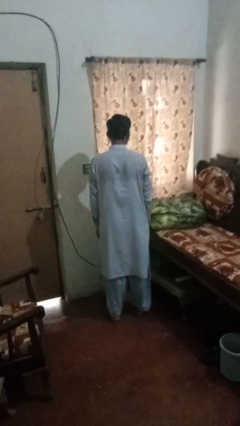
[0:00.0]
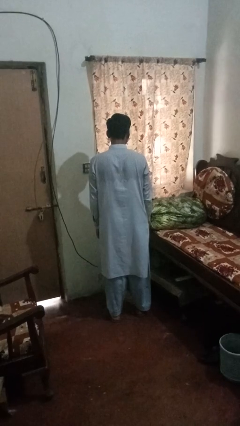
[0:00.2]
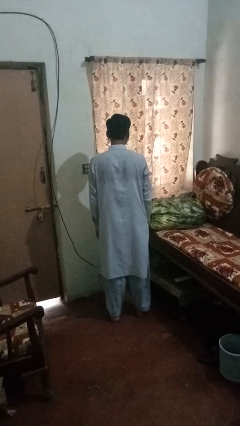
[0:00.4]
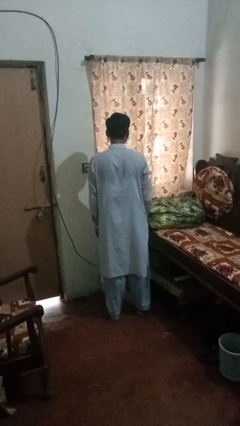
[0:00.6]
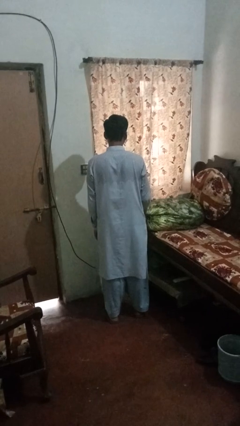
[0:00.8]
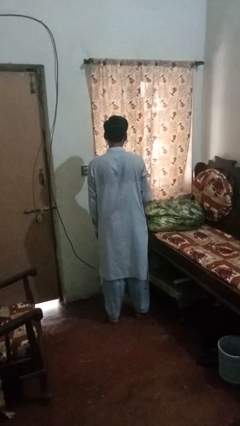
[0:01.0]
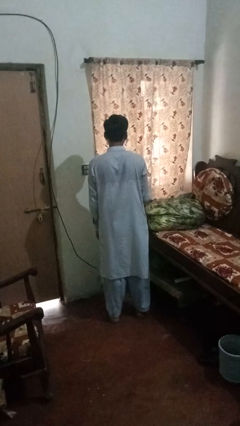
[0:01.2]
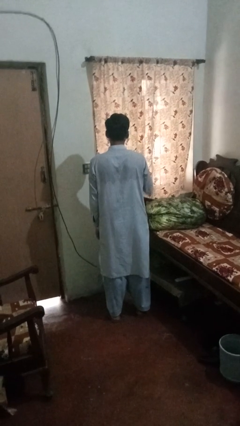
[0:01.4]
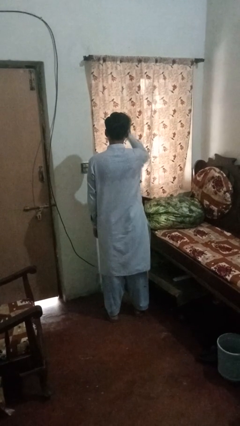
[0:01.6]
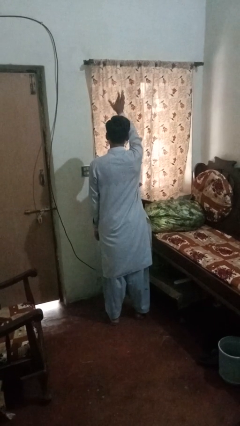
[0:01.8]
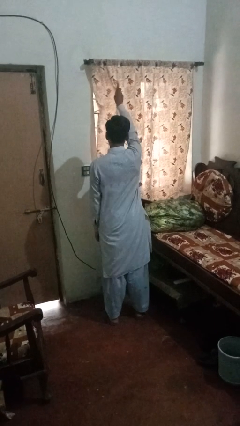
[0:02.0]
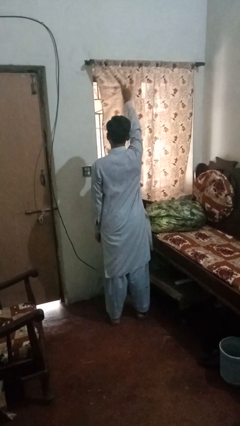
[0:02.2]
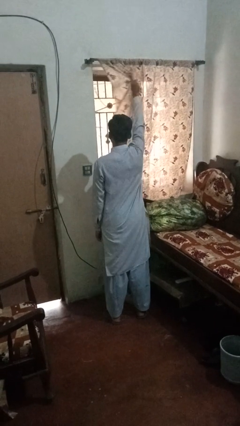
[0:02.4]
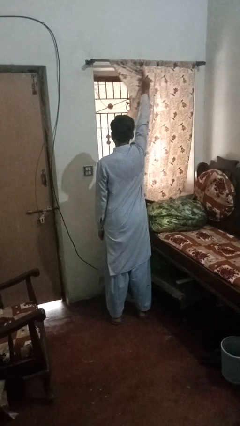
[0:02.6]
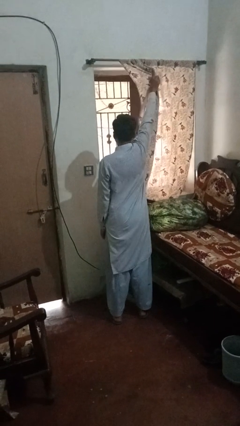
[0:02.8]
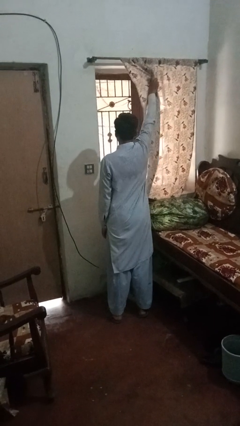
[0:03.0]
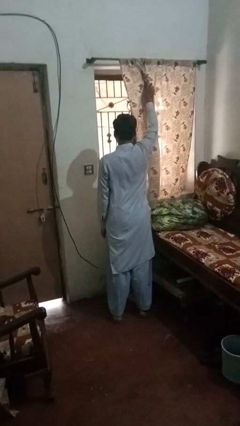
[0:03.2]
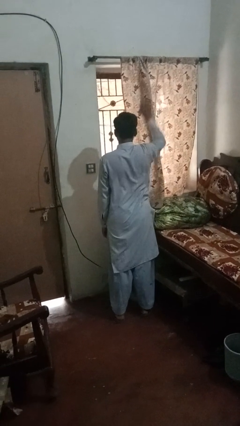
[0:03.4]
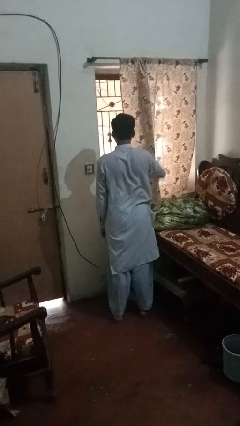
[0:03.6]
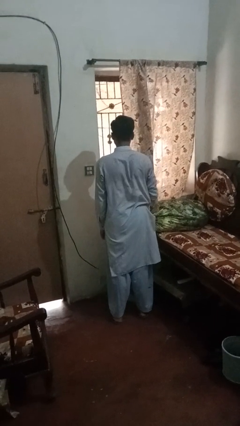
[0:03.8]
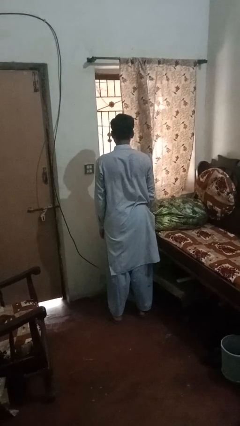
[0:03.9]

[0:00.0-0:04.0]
person opens curtains

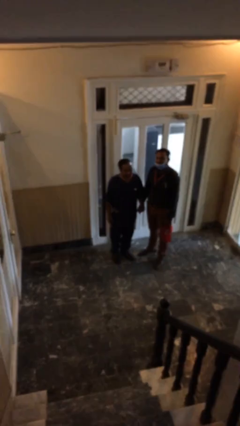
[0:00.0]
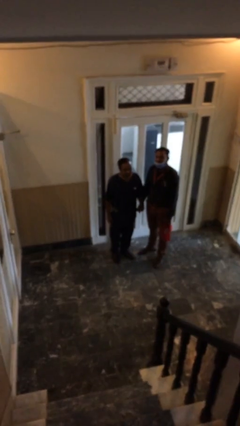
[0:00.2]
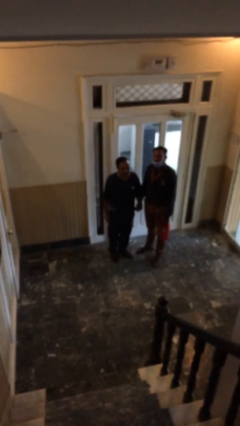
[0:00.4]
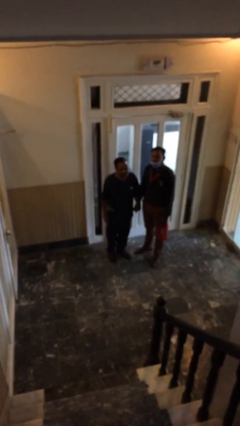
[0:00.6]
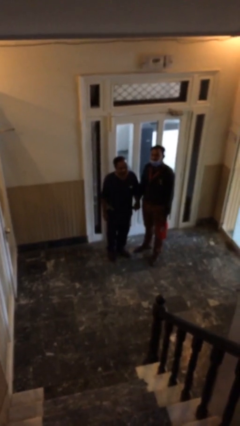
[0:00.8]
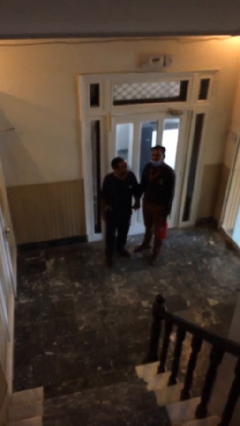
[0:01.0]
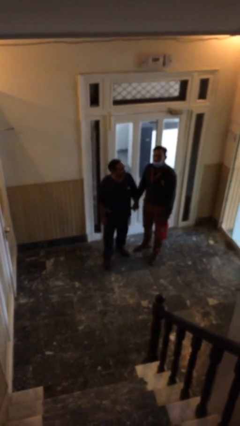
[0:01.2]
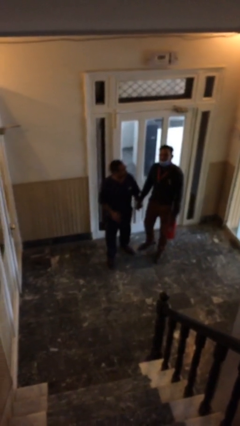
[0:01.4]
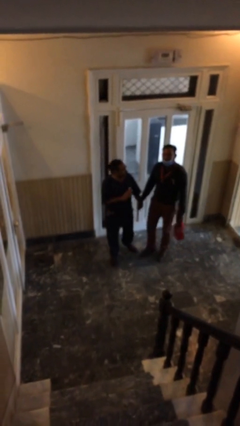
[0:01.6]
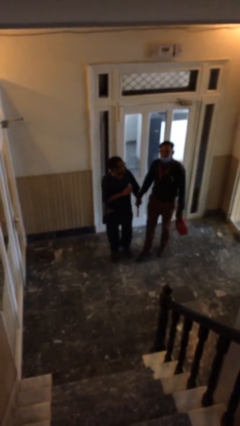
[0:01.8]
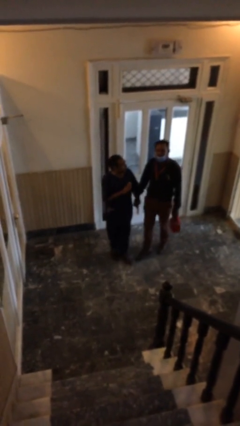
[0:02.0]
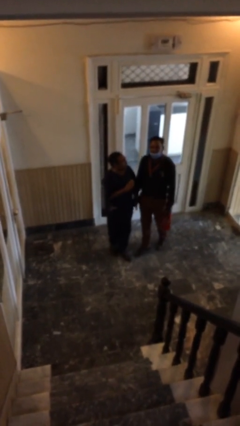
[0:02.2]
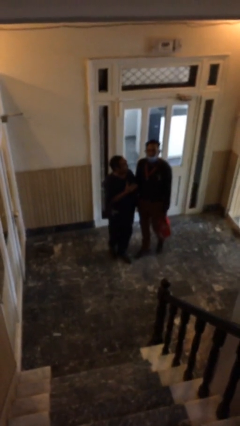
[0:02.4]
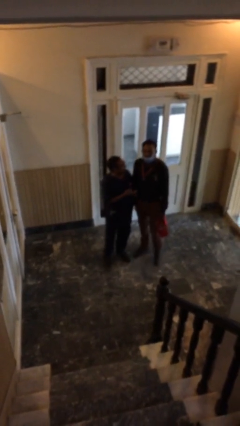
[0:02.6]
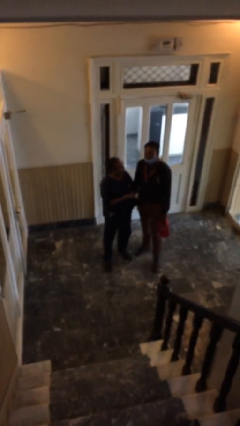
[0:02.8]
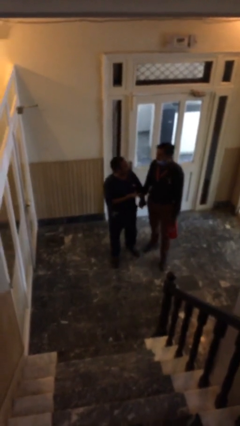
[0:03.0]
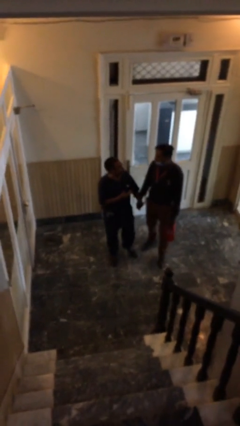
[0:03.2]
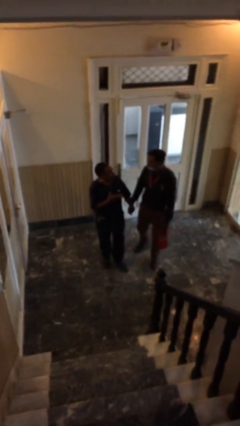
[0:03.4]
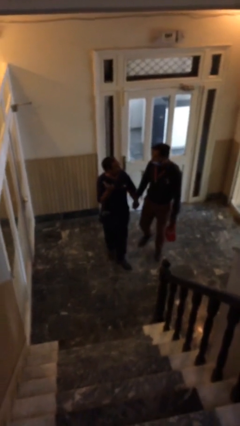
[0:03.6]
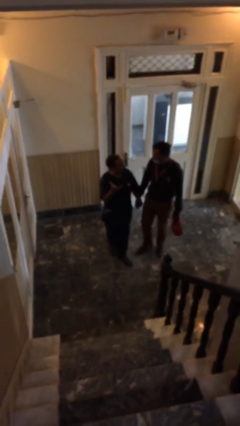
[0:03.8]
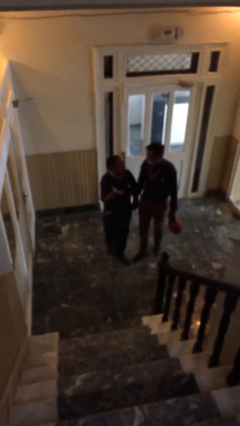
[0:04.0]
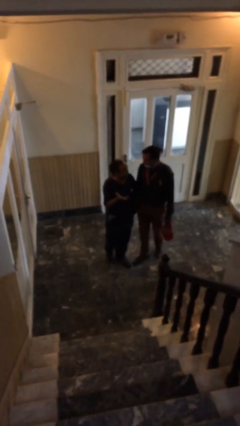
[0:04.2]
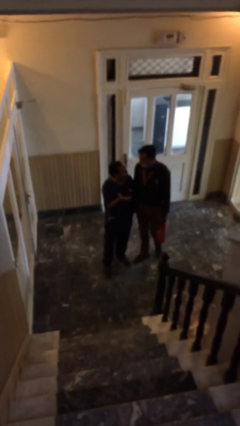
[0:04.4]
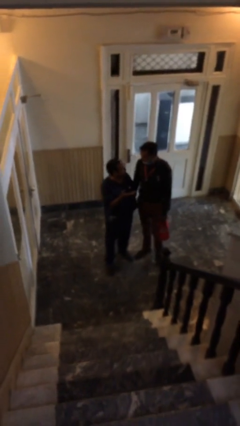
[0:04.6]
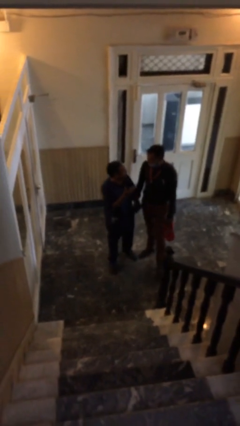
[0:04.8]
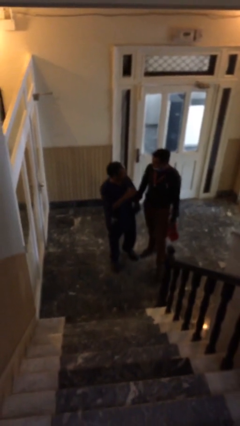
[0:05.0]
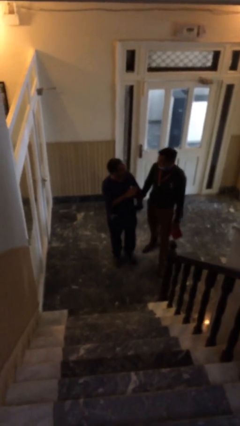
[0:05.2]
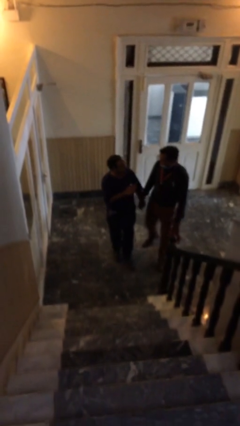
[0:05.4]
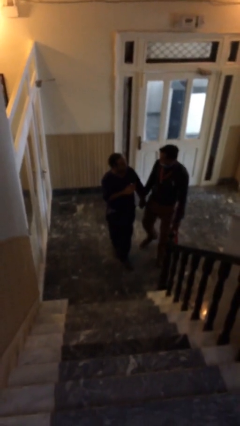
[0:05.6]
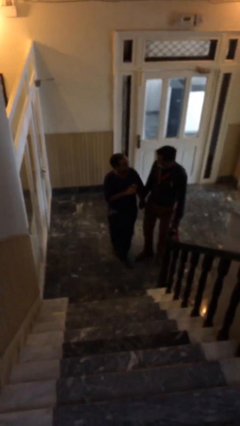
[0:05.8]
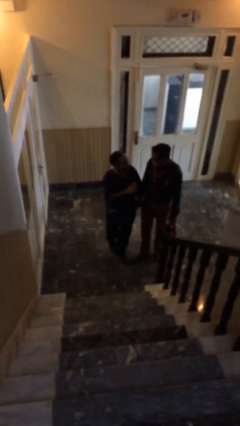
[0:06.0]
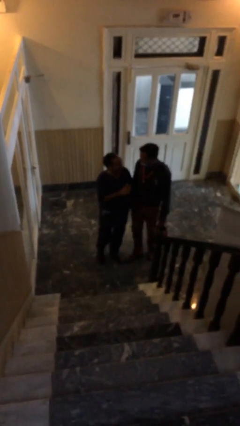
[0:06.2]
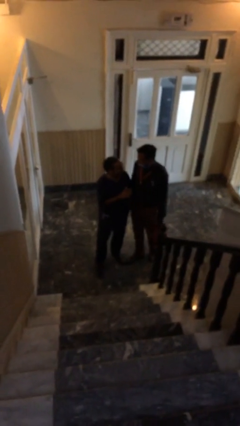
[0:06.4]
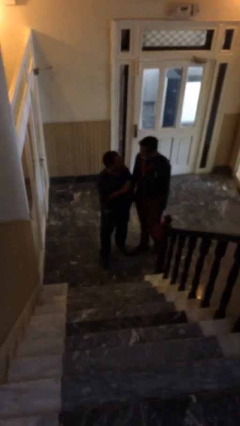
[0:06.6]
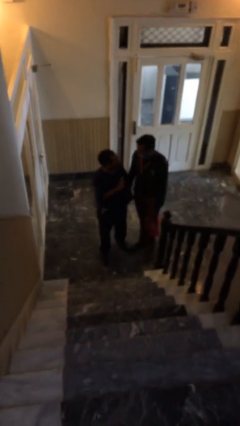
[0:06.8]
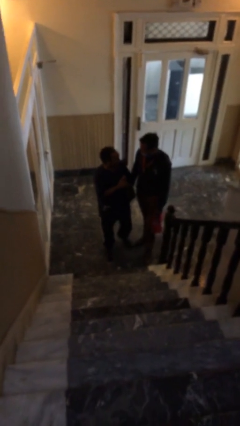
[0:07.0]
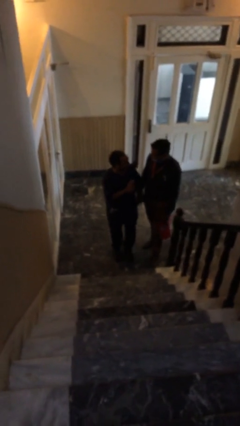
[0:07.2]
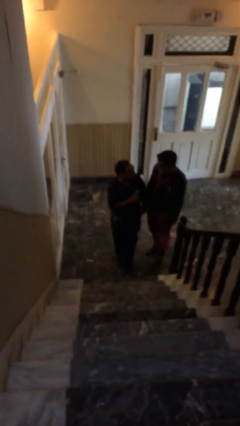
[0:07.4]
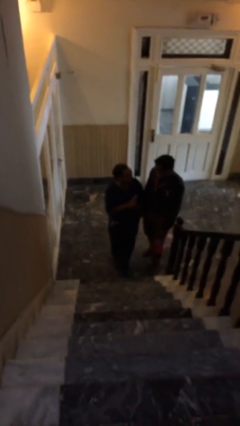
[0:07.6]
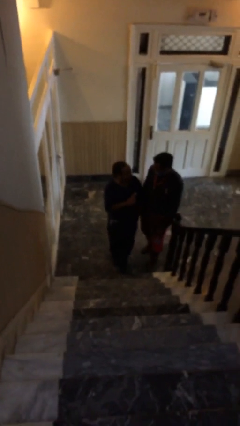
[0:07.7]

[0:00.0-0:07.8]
person holds hand

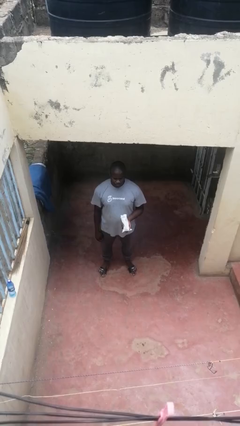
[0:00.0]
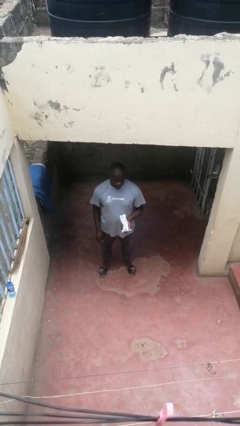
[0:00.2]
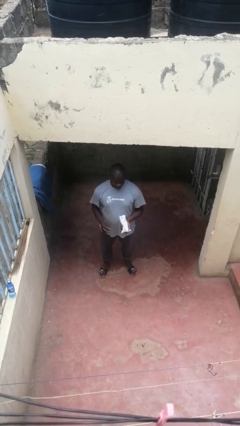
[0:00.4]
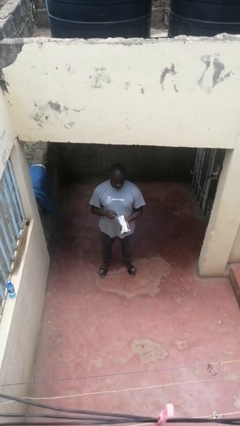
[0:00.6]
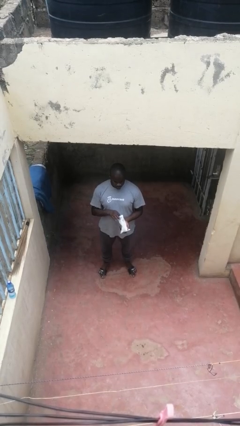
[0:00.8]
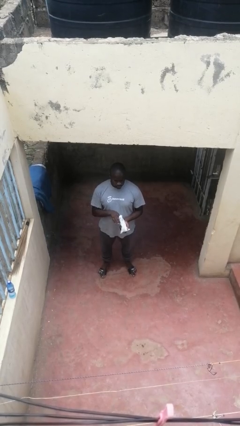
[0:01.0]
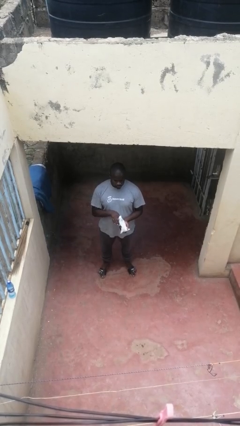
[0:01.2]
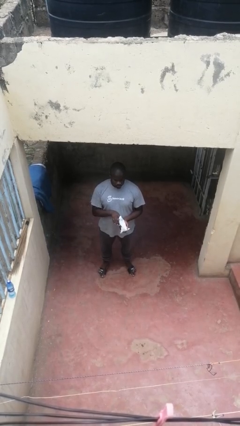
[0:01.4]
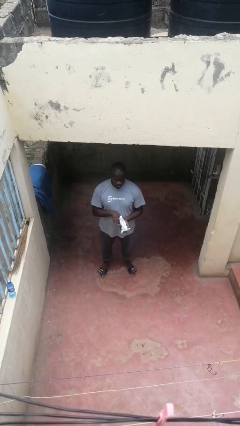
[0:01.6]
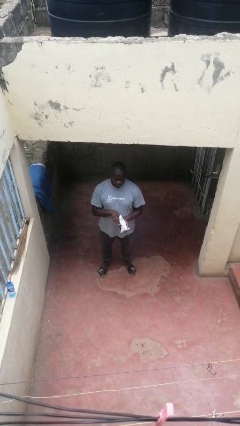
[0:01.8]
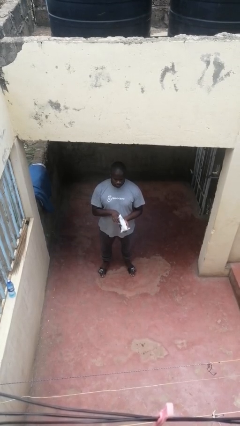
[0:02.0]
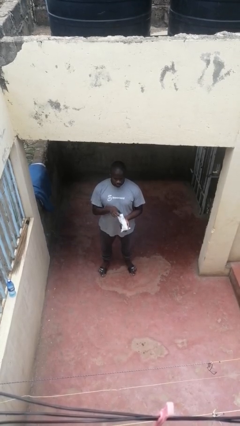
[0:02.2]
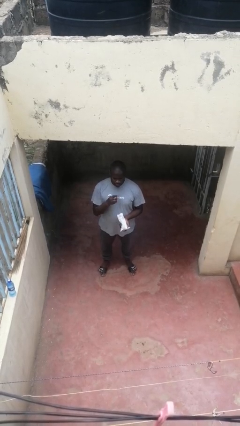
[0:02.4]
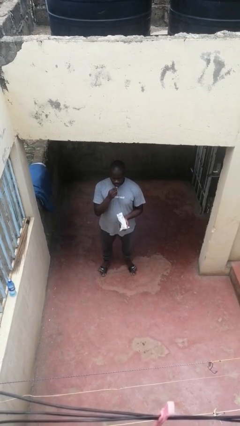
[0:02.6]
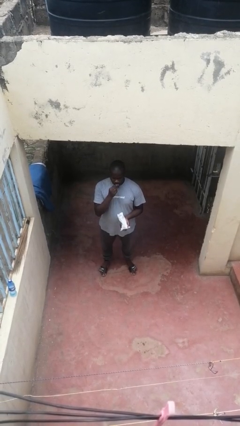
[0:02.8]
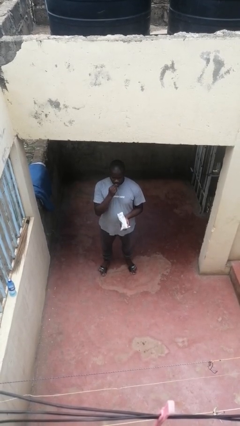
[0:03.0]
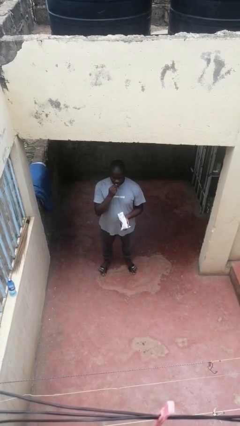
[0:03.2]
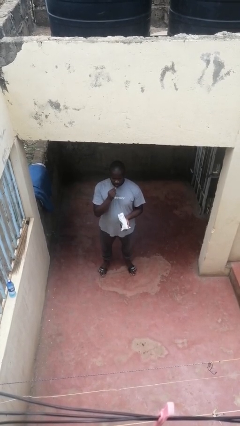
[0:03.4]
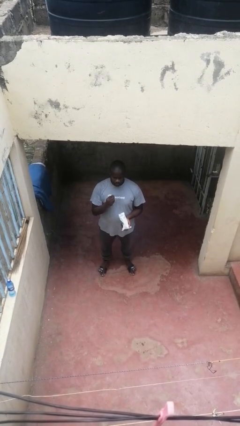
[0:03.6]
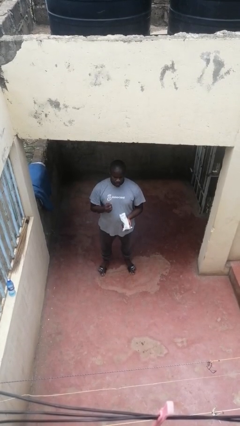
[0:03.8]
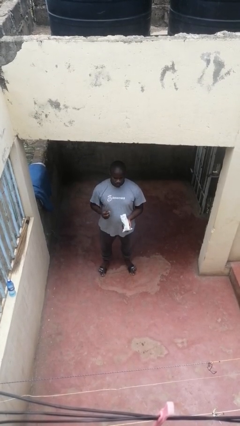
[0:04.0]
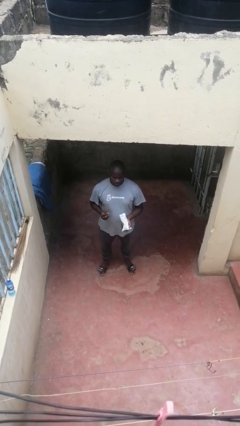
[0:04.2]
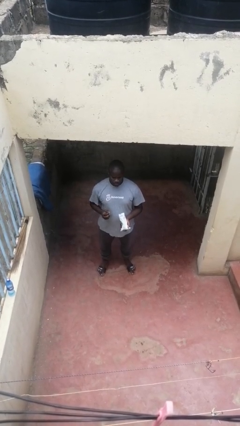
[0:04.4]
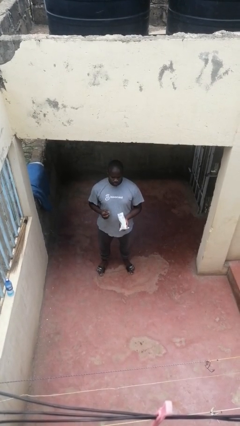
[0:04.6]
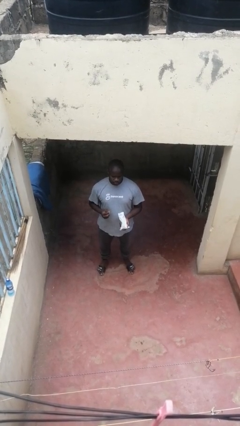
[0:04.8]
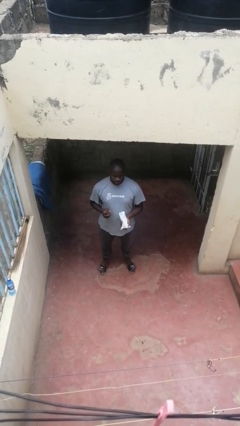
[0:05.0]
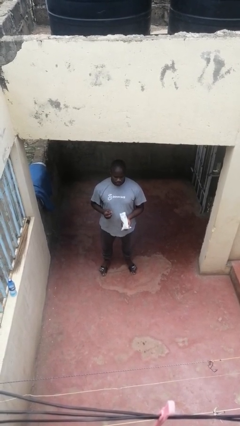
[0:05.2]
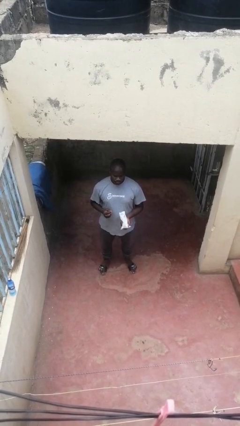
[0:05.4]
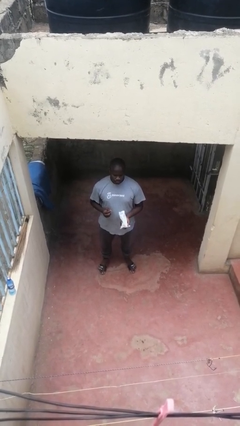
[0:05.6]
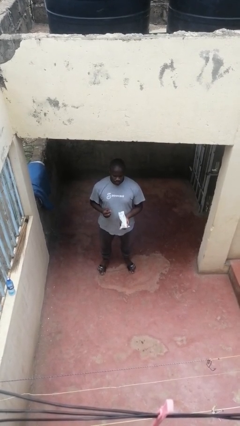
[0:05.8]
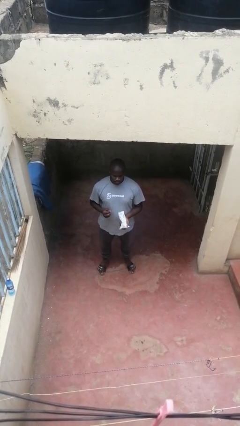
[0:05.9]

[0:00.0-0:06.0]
person eats snack from bag

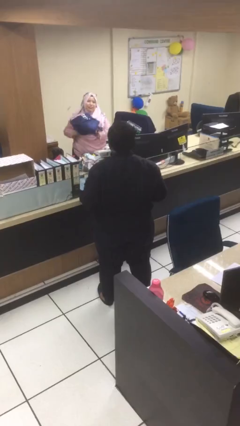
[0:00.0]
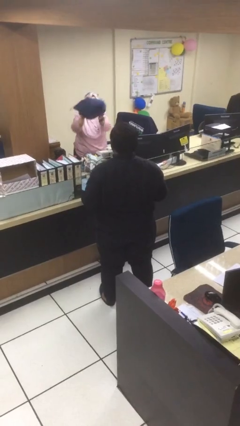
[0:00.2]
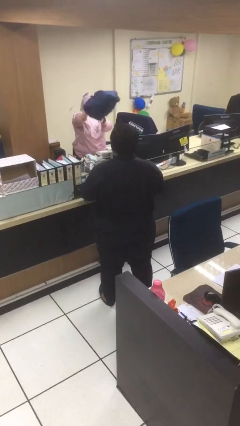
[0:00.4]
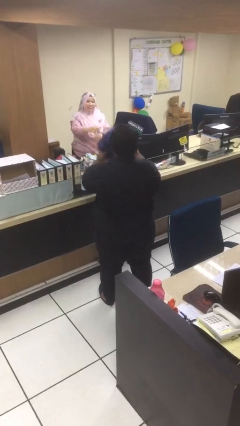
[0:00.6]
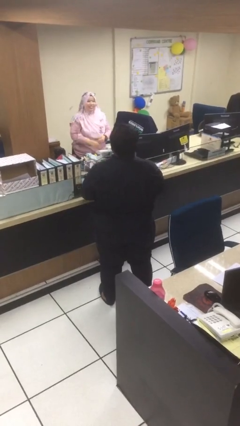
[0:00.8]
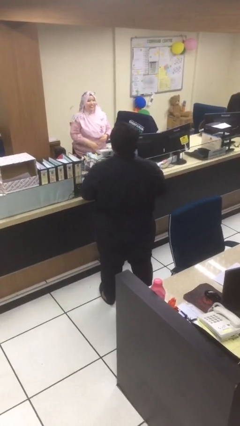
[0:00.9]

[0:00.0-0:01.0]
person catches object from person
